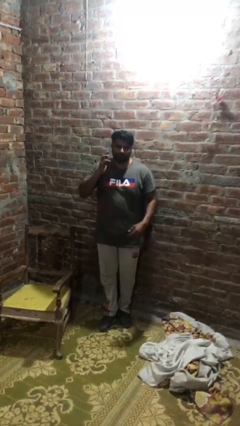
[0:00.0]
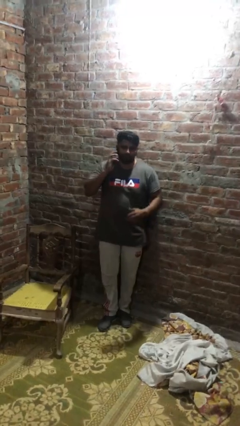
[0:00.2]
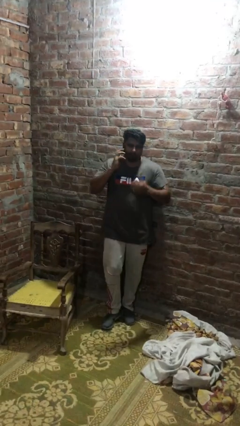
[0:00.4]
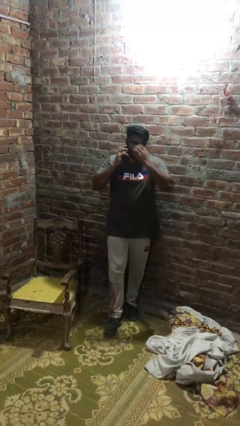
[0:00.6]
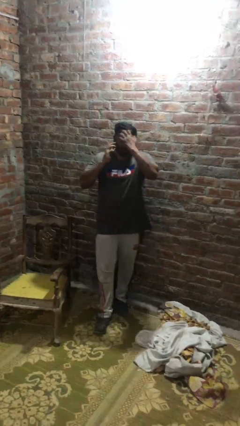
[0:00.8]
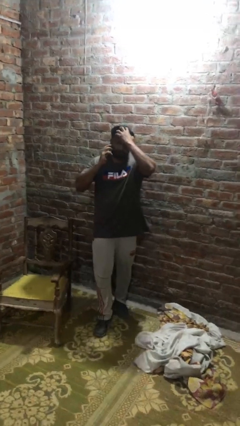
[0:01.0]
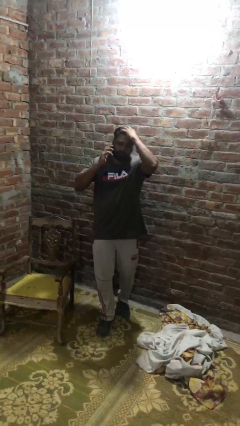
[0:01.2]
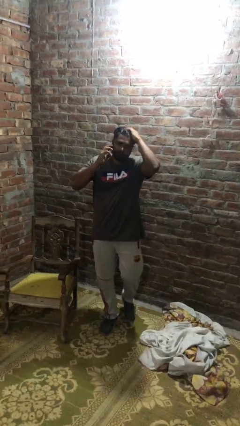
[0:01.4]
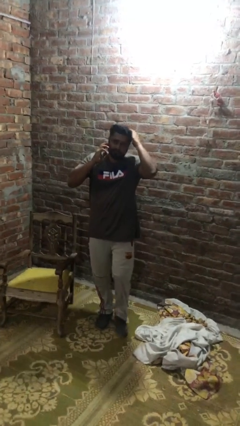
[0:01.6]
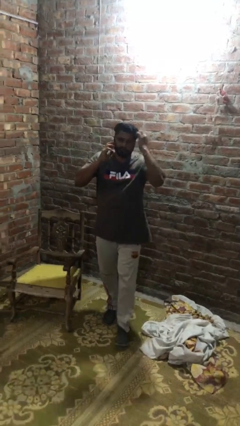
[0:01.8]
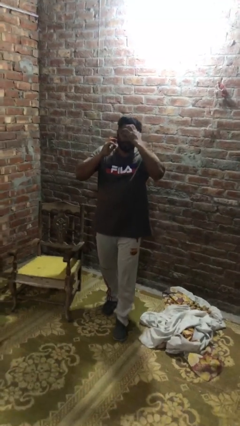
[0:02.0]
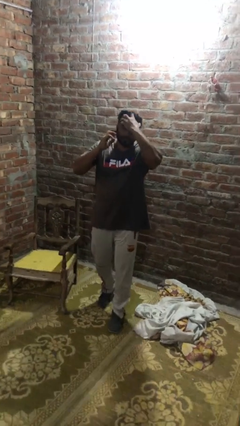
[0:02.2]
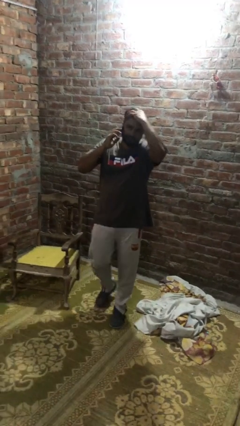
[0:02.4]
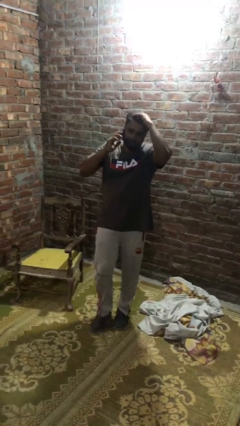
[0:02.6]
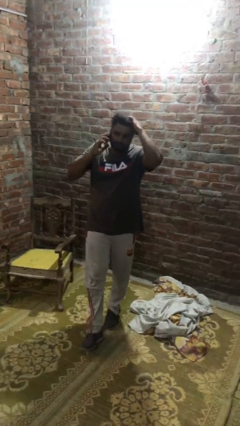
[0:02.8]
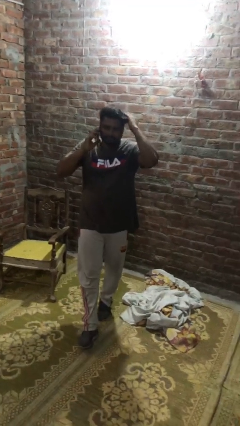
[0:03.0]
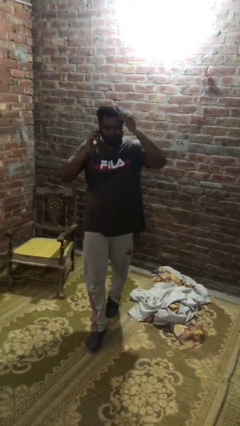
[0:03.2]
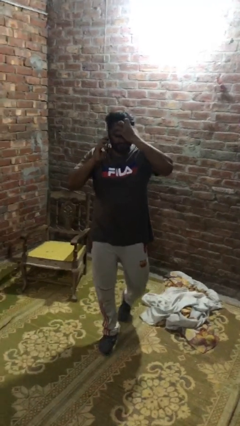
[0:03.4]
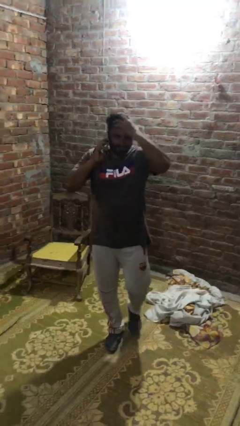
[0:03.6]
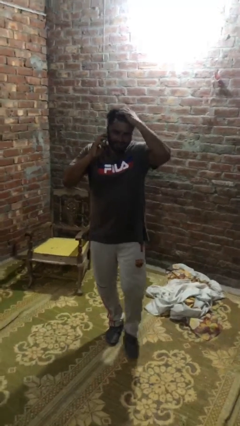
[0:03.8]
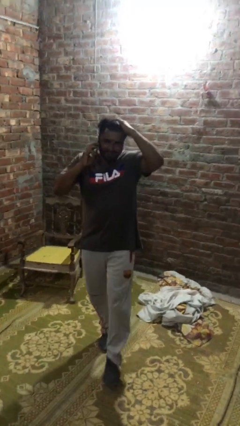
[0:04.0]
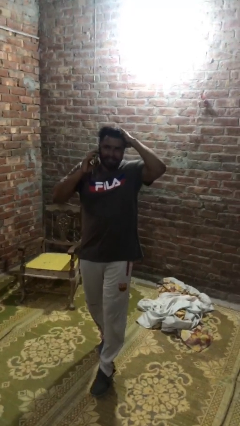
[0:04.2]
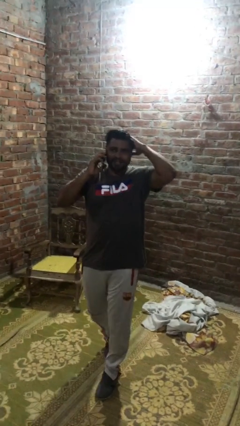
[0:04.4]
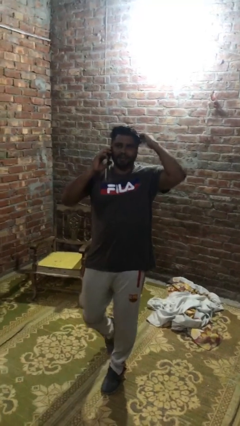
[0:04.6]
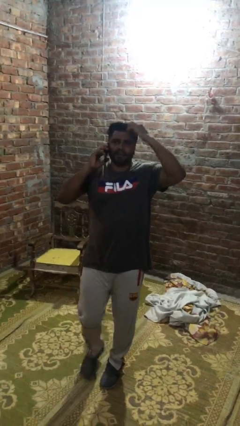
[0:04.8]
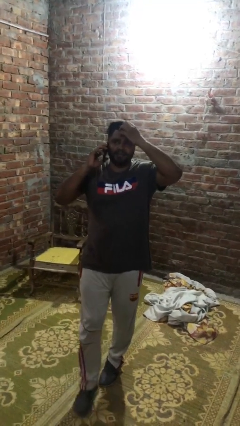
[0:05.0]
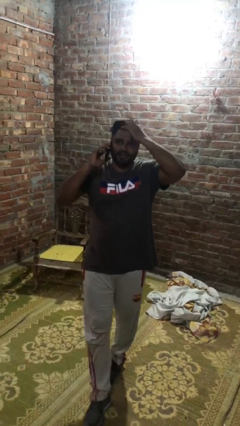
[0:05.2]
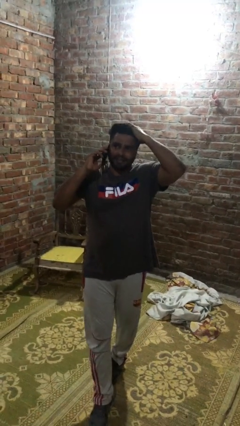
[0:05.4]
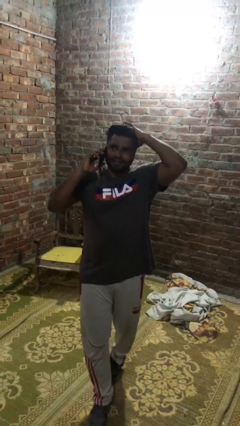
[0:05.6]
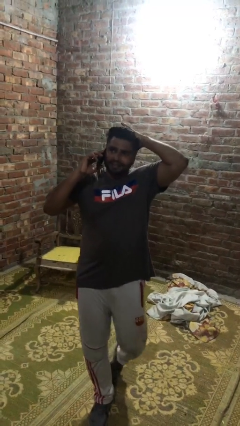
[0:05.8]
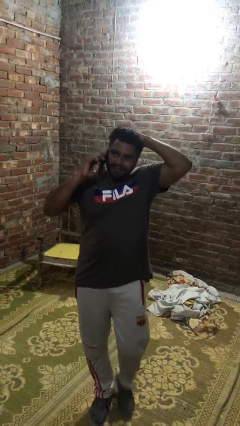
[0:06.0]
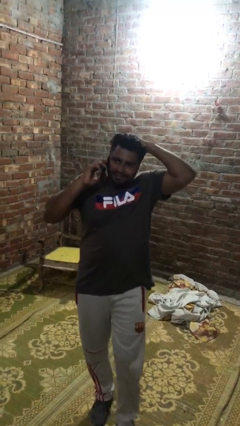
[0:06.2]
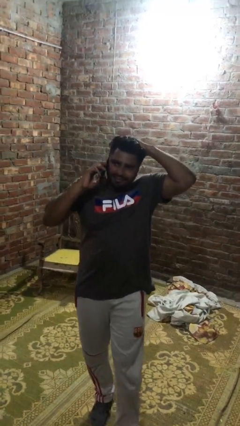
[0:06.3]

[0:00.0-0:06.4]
person talks on phone

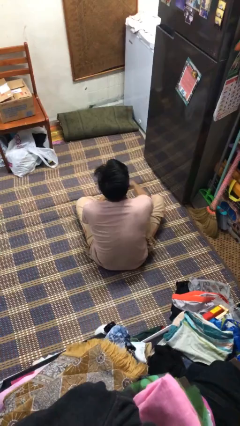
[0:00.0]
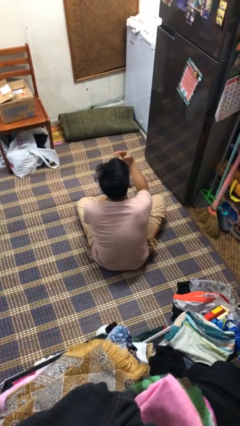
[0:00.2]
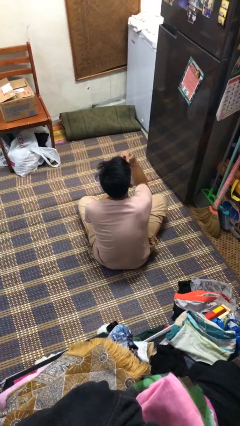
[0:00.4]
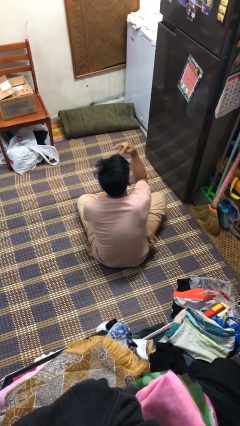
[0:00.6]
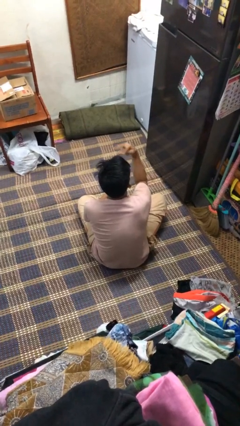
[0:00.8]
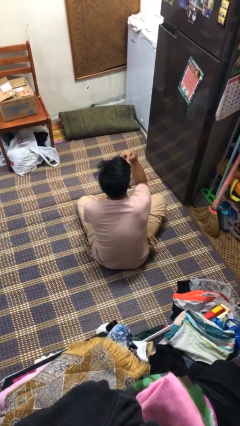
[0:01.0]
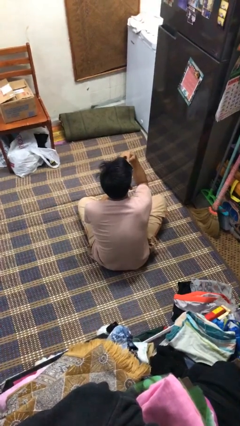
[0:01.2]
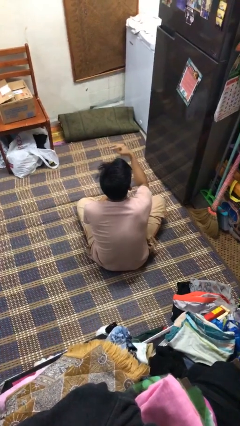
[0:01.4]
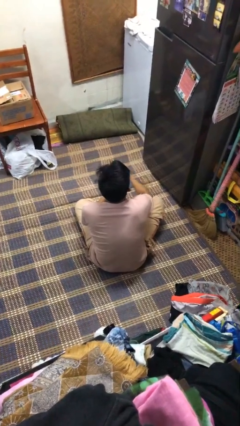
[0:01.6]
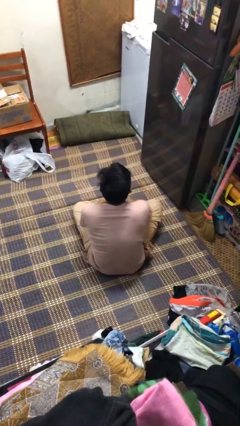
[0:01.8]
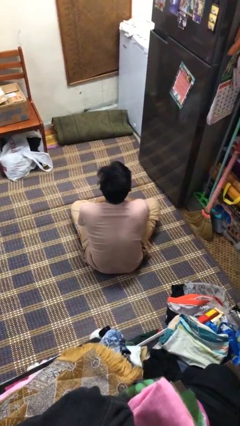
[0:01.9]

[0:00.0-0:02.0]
person gestures watch closely

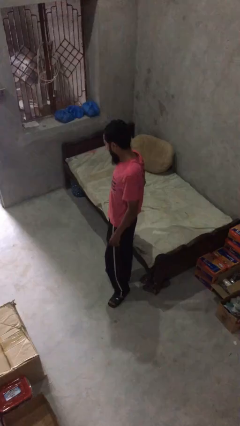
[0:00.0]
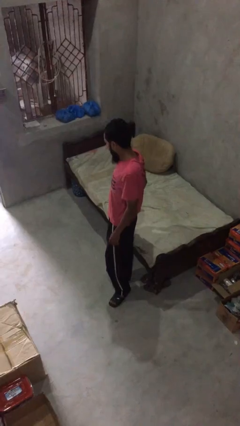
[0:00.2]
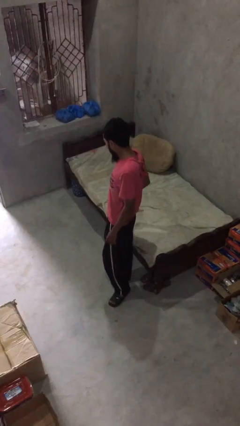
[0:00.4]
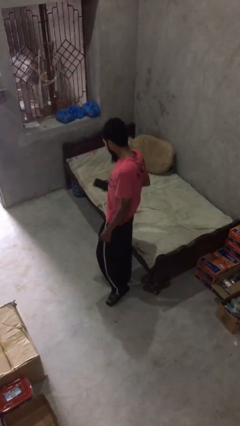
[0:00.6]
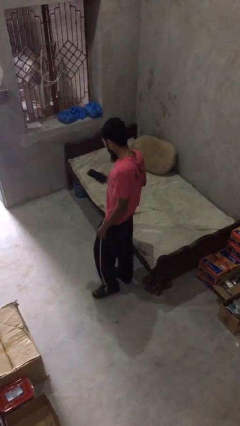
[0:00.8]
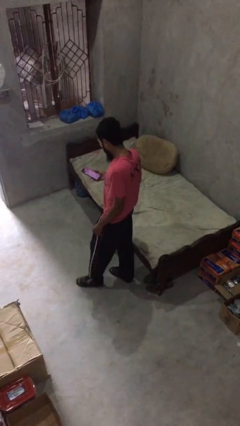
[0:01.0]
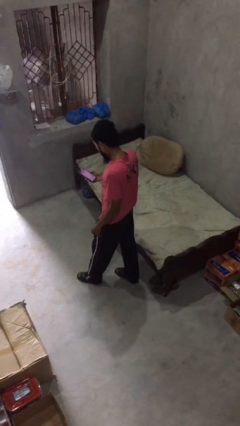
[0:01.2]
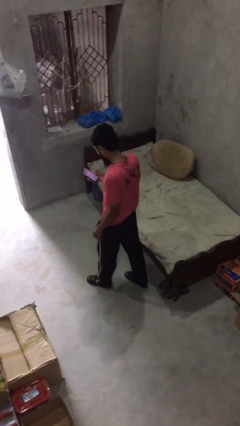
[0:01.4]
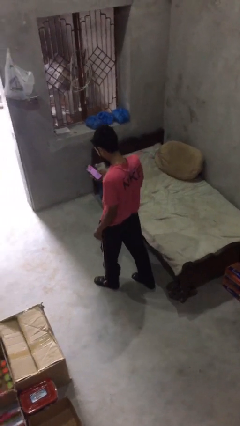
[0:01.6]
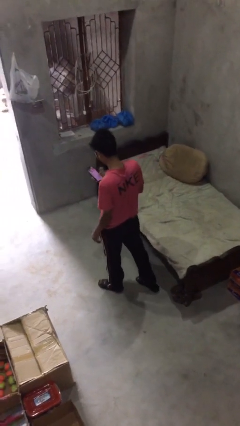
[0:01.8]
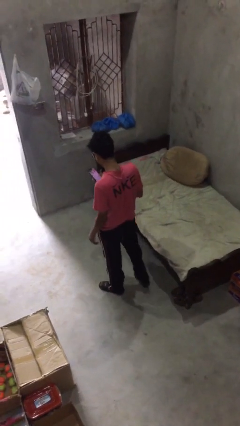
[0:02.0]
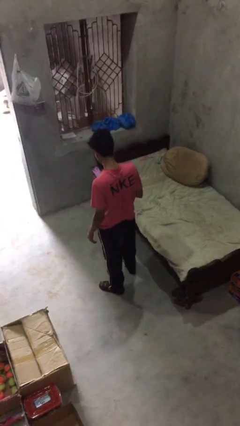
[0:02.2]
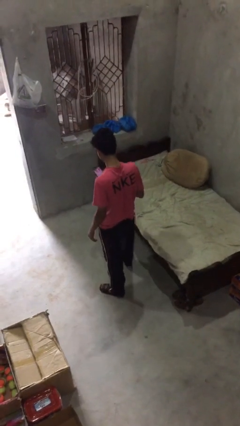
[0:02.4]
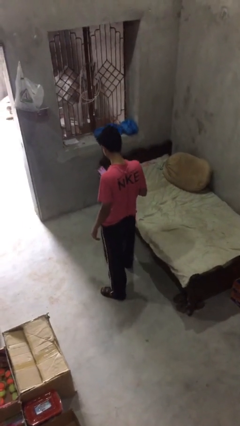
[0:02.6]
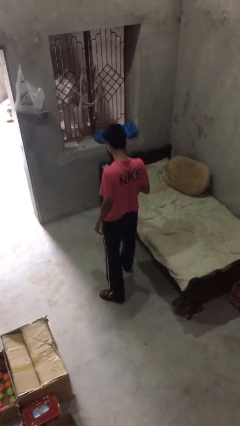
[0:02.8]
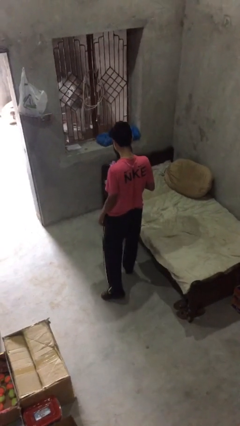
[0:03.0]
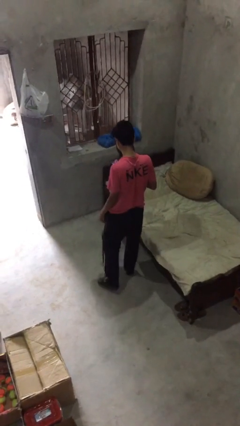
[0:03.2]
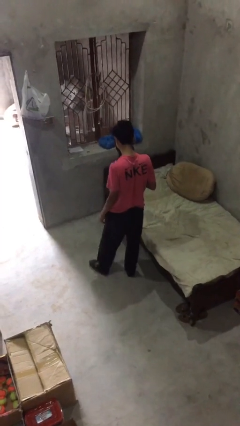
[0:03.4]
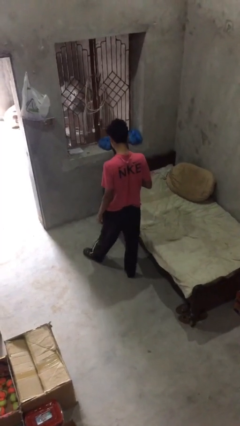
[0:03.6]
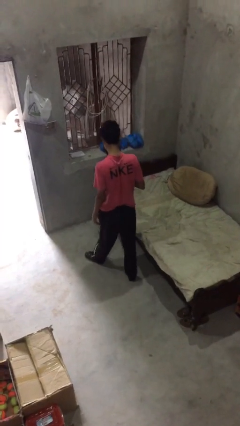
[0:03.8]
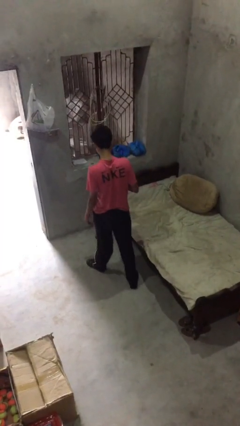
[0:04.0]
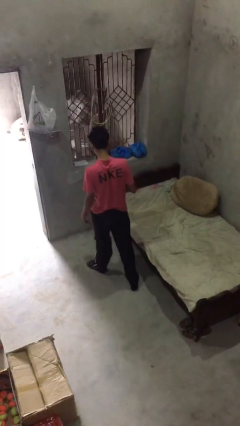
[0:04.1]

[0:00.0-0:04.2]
person texts on phone

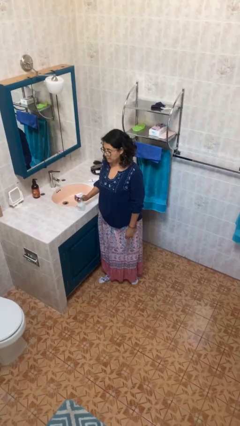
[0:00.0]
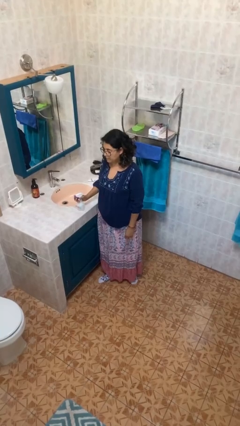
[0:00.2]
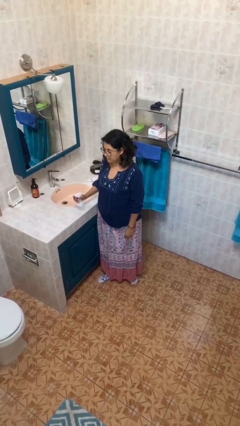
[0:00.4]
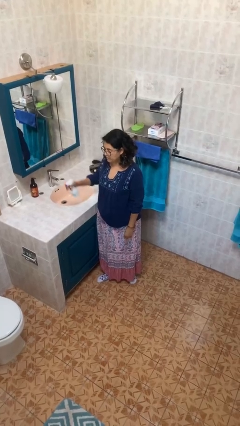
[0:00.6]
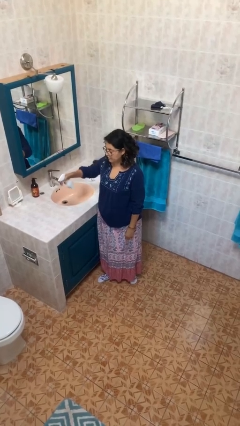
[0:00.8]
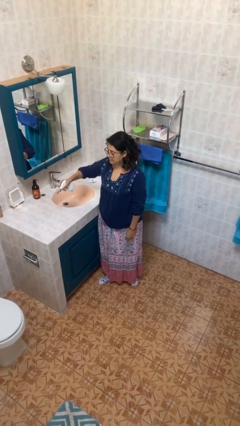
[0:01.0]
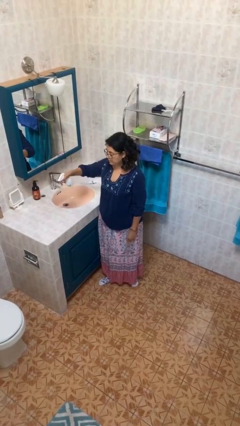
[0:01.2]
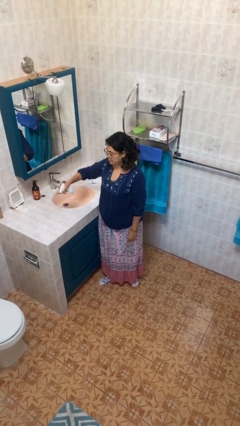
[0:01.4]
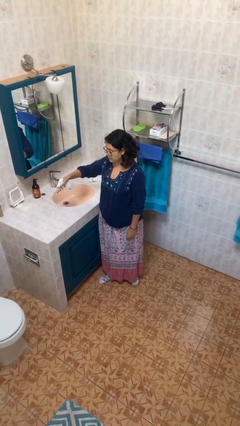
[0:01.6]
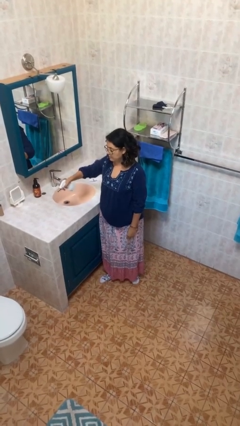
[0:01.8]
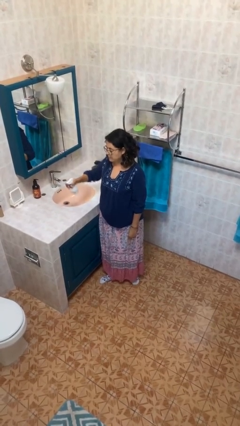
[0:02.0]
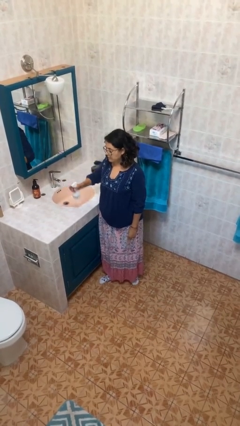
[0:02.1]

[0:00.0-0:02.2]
person sprays from bottle

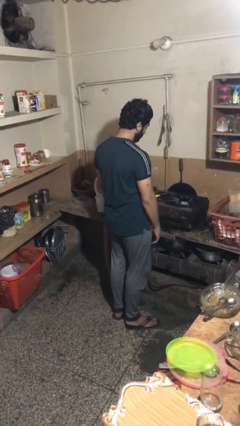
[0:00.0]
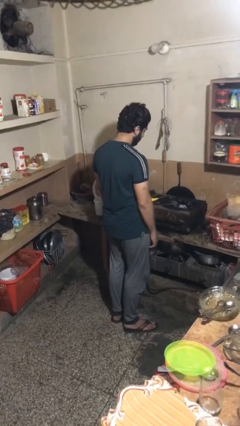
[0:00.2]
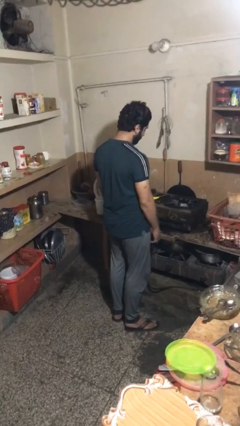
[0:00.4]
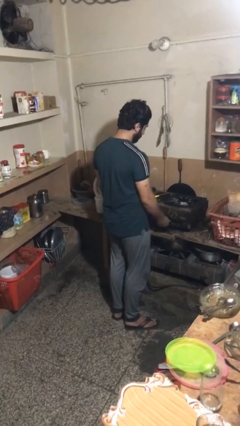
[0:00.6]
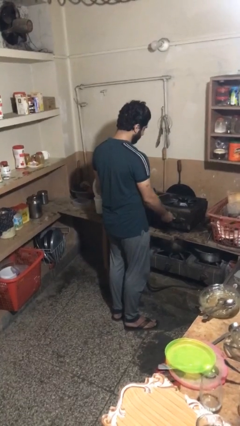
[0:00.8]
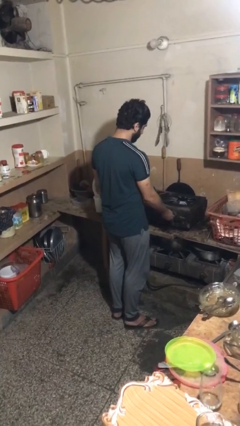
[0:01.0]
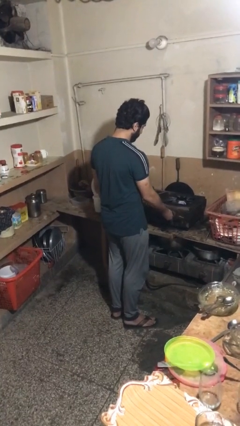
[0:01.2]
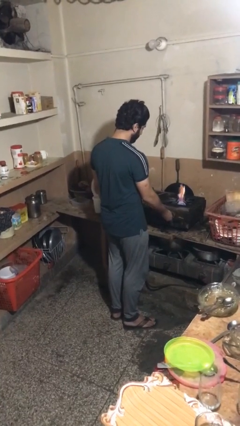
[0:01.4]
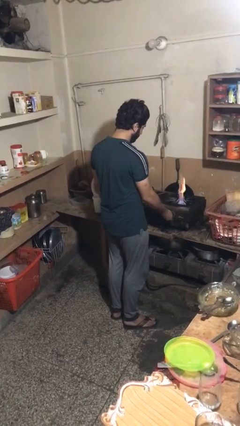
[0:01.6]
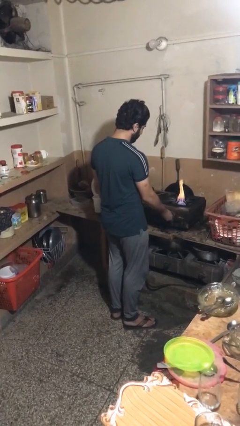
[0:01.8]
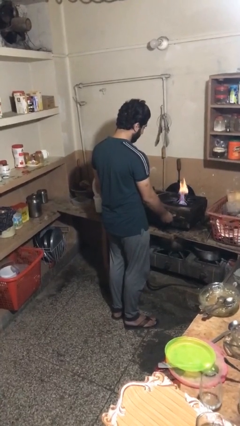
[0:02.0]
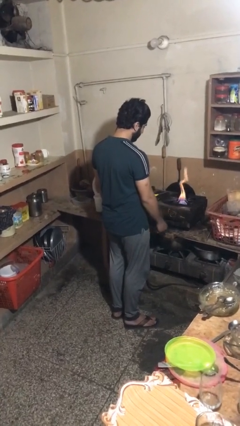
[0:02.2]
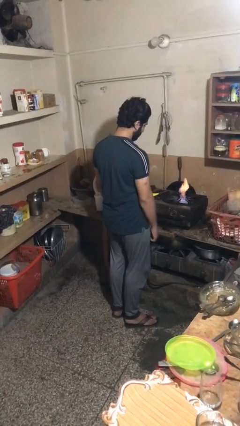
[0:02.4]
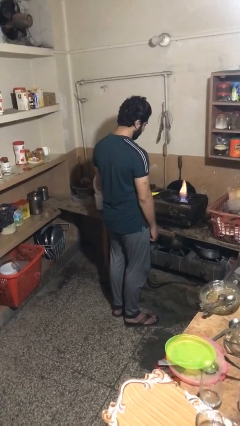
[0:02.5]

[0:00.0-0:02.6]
person turns on stovetop

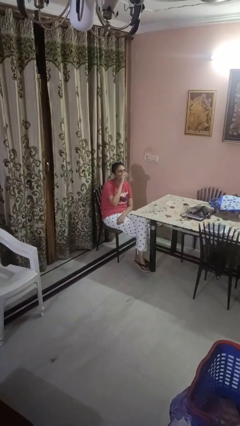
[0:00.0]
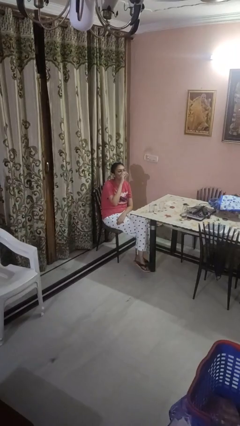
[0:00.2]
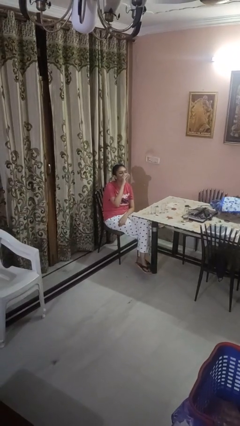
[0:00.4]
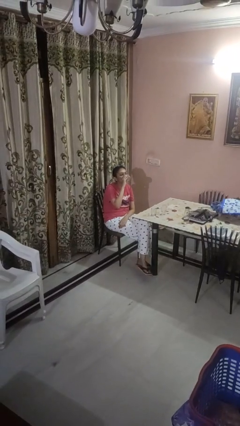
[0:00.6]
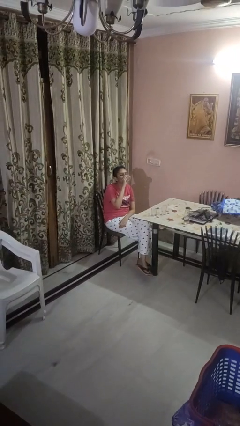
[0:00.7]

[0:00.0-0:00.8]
person drinks from shotglass
